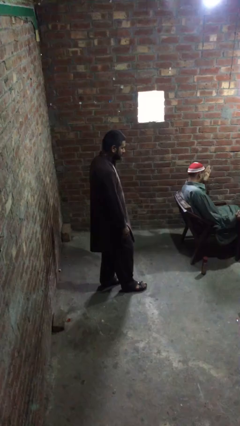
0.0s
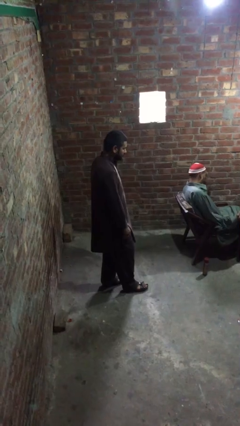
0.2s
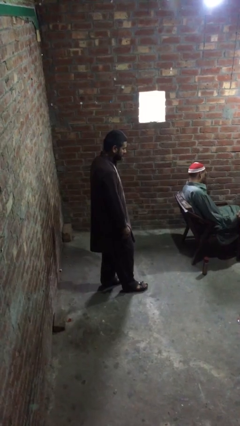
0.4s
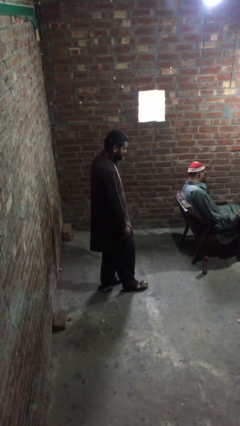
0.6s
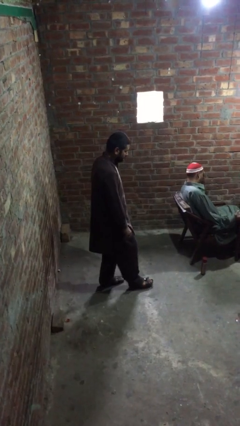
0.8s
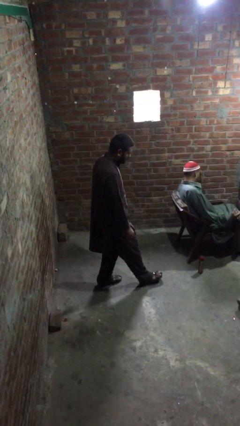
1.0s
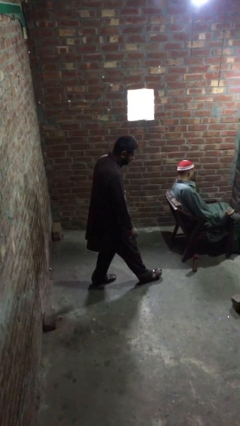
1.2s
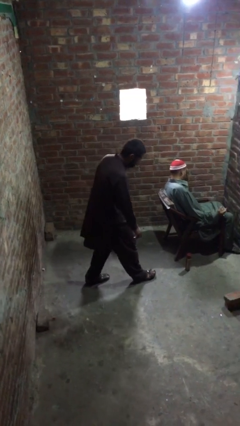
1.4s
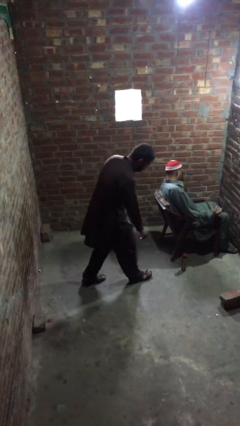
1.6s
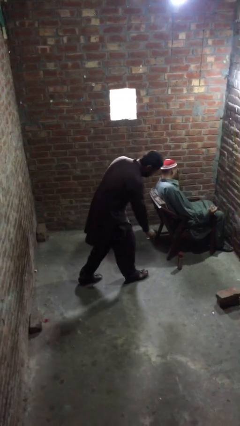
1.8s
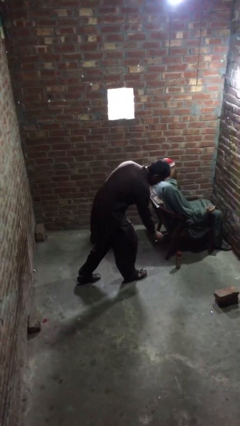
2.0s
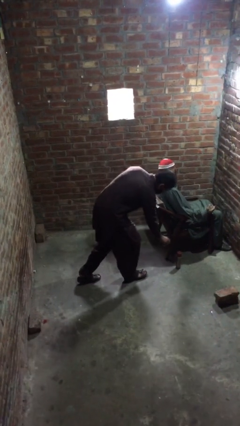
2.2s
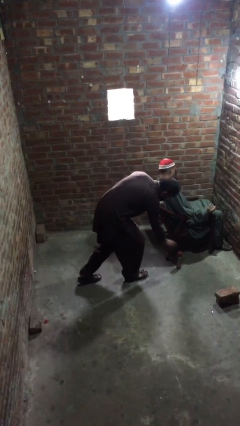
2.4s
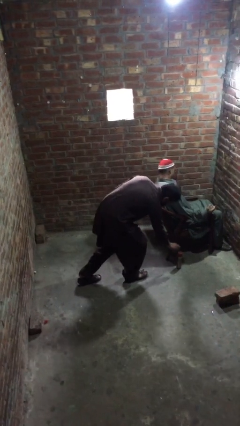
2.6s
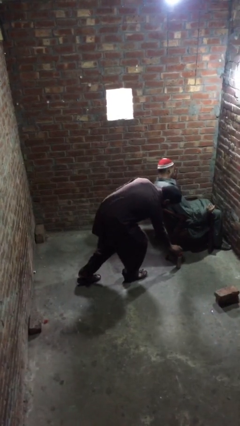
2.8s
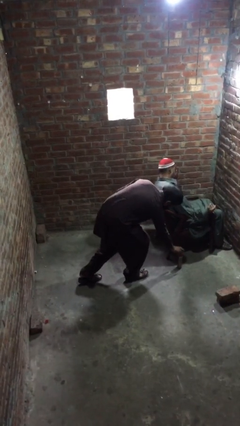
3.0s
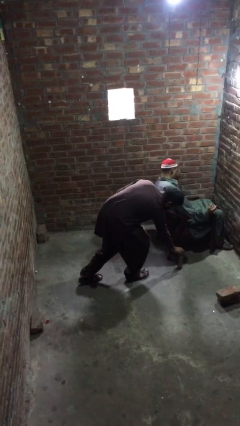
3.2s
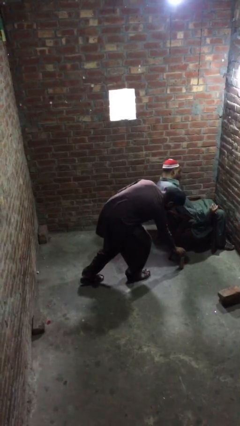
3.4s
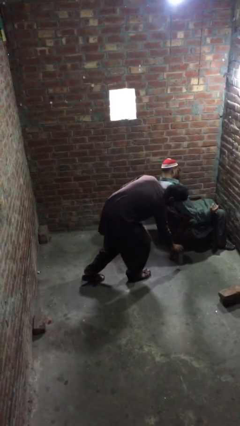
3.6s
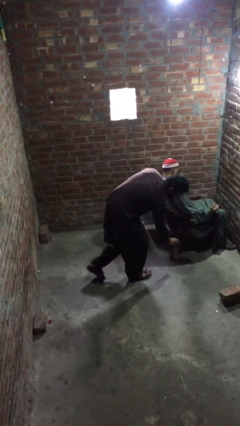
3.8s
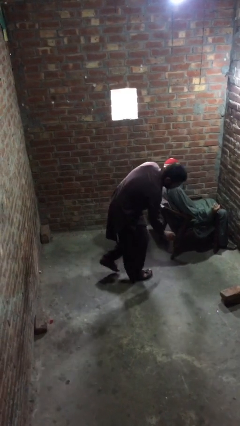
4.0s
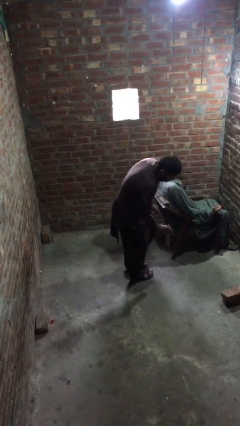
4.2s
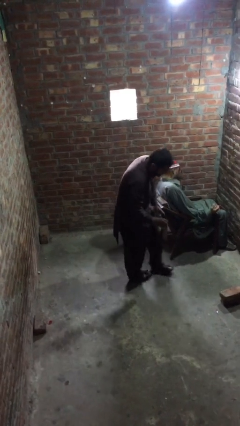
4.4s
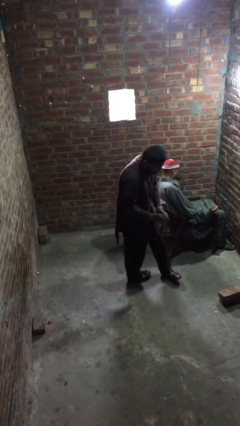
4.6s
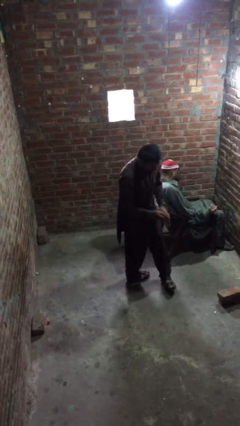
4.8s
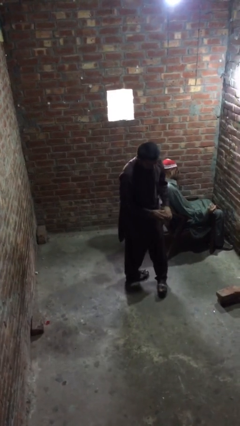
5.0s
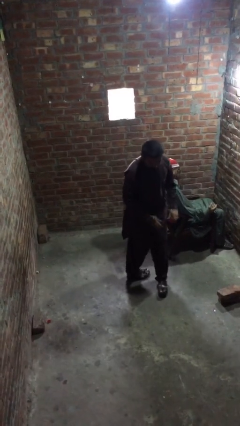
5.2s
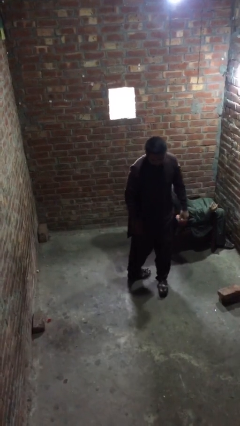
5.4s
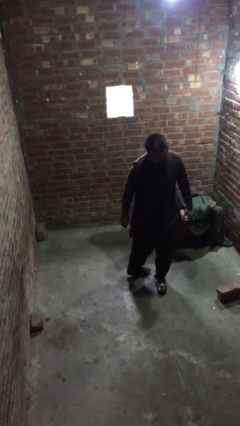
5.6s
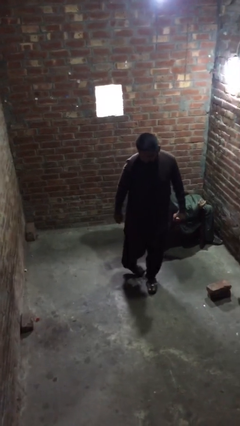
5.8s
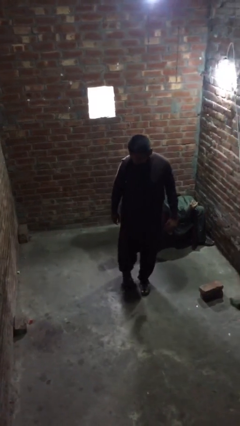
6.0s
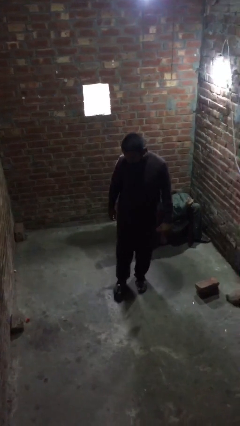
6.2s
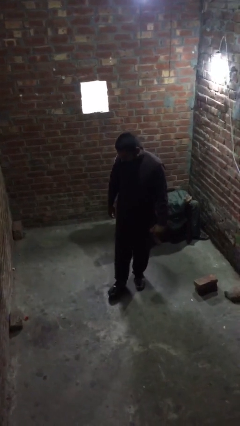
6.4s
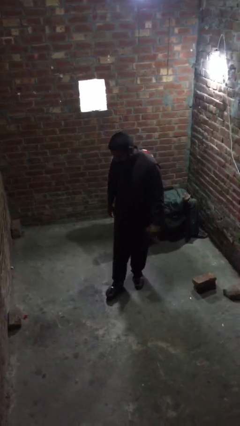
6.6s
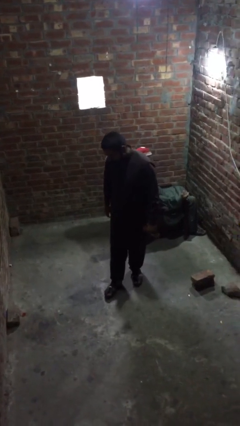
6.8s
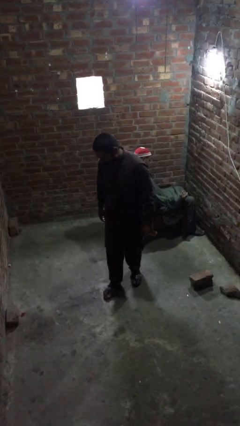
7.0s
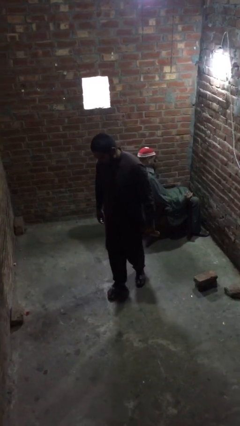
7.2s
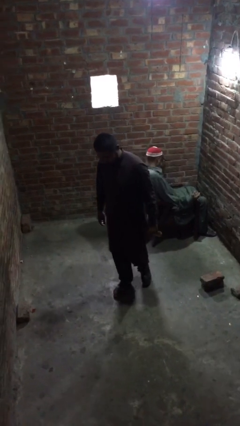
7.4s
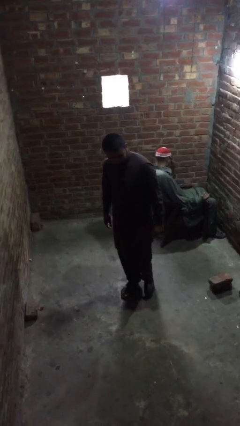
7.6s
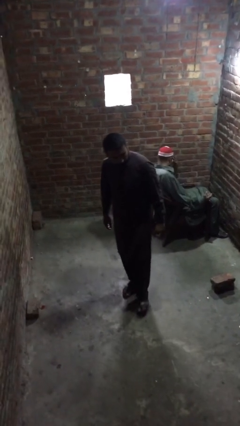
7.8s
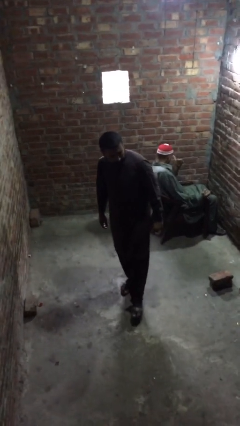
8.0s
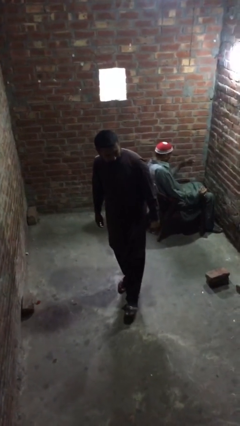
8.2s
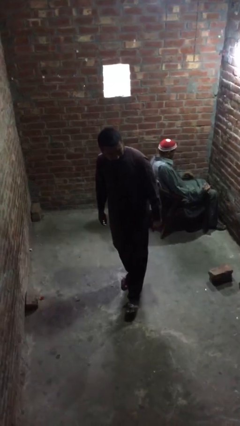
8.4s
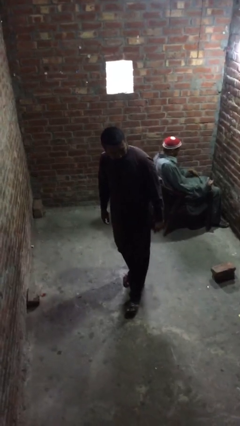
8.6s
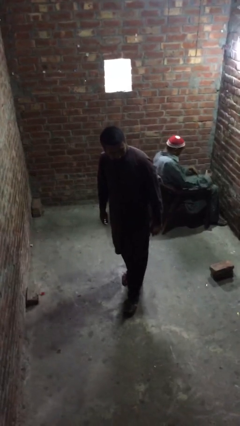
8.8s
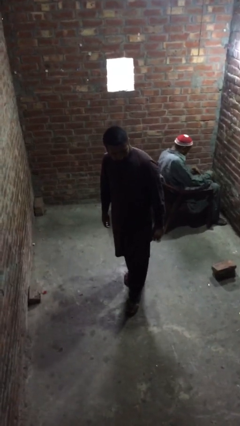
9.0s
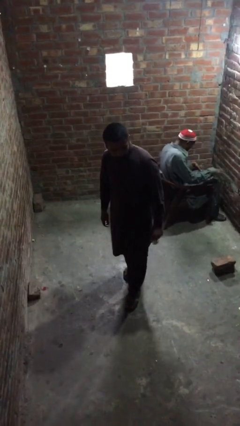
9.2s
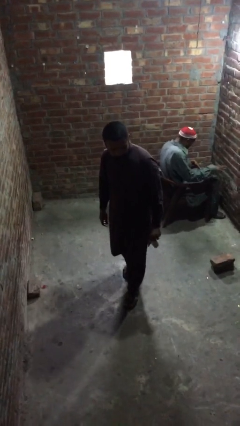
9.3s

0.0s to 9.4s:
person steals object from person

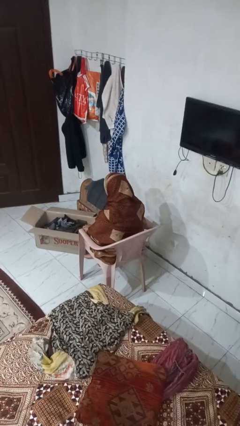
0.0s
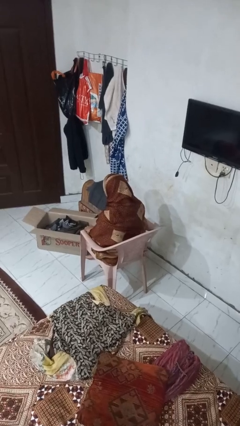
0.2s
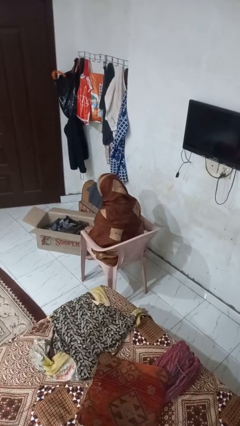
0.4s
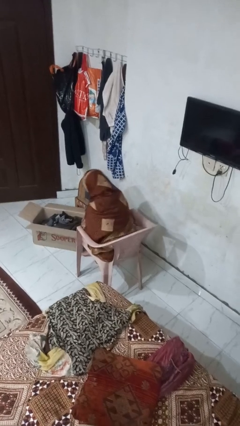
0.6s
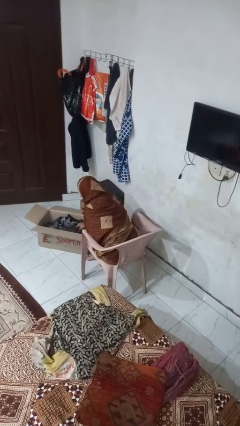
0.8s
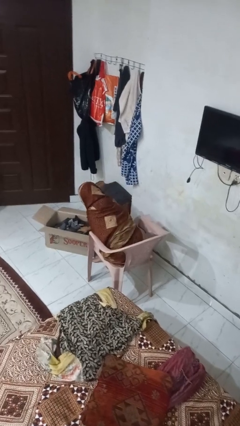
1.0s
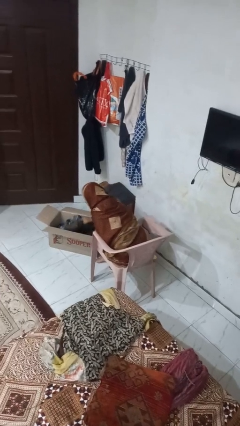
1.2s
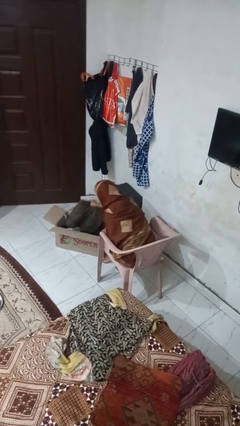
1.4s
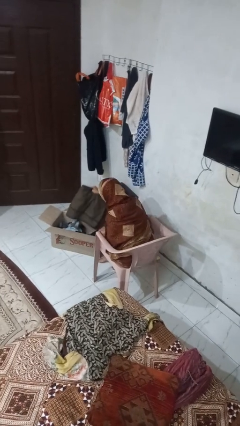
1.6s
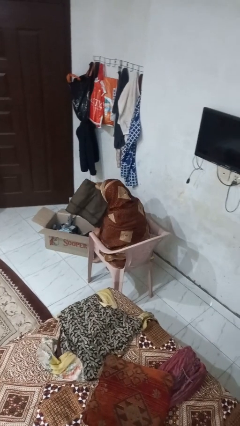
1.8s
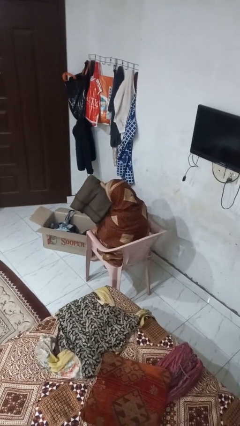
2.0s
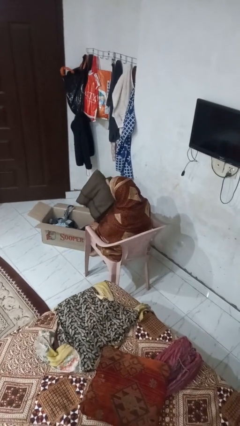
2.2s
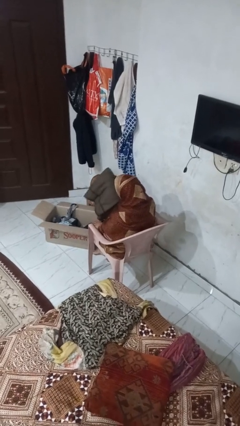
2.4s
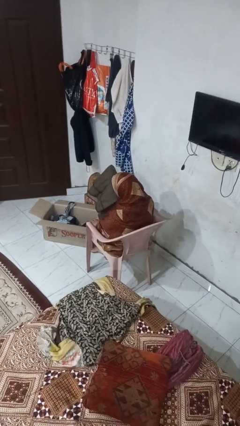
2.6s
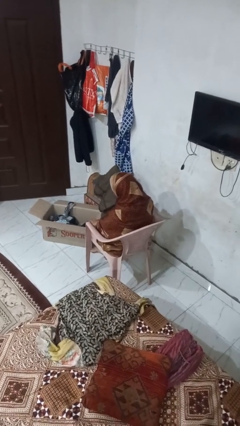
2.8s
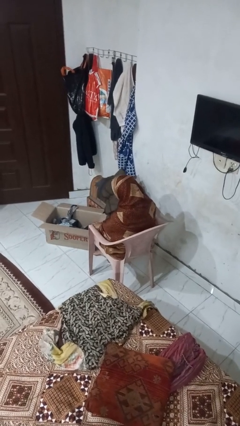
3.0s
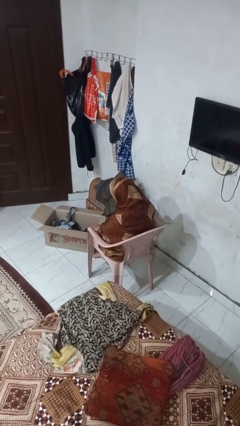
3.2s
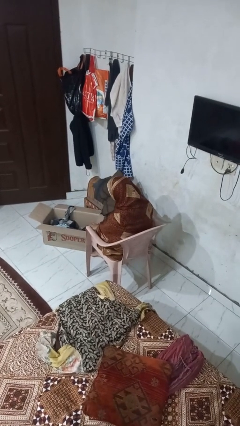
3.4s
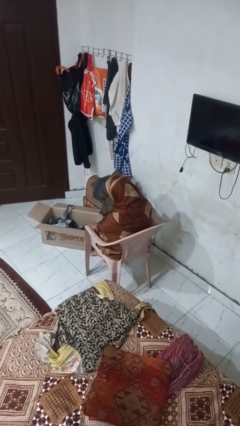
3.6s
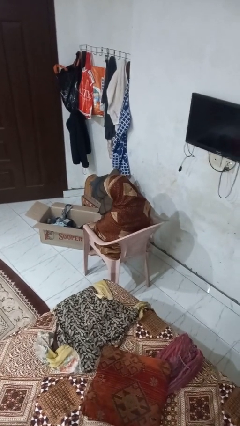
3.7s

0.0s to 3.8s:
person takes object from box

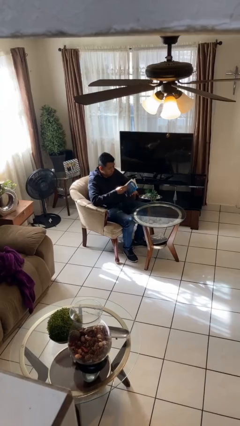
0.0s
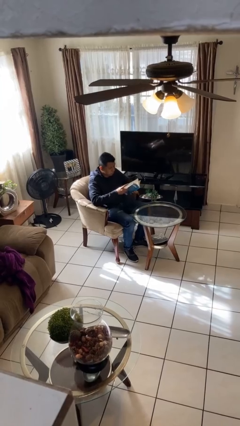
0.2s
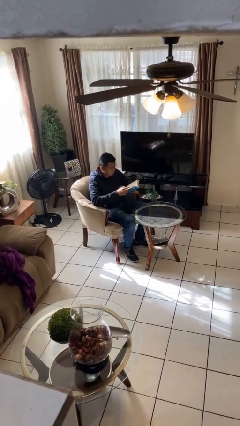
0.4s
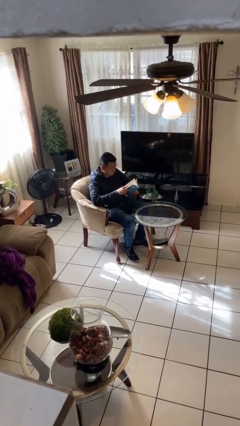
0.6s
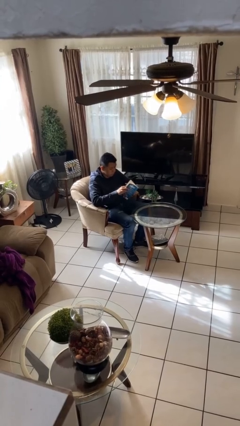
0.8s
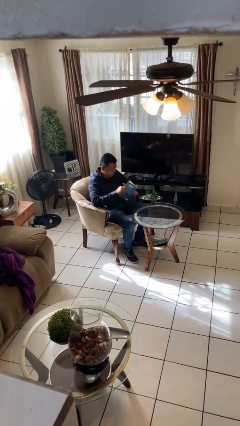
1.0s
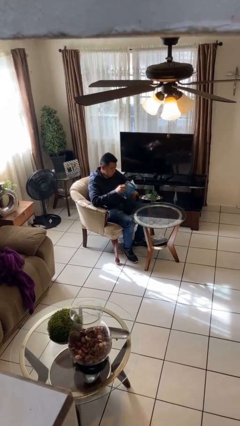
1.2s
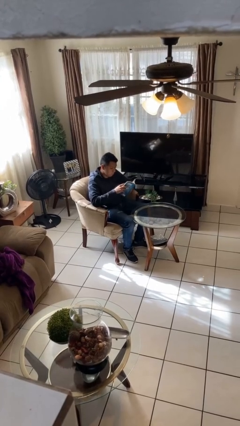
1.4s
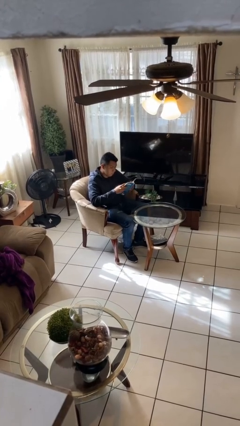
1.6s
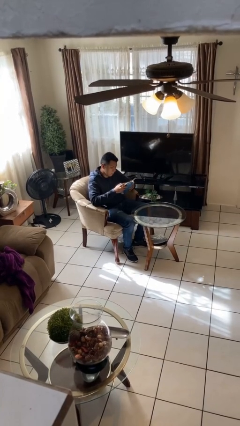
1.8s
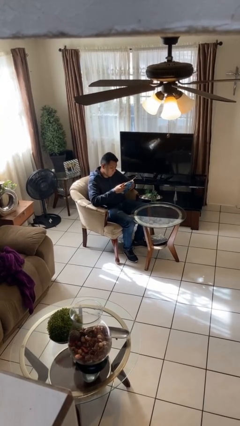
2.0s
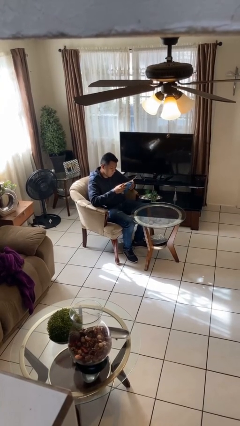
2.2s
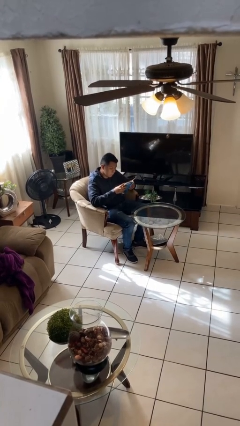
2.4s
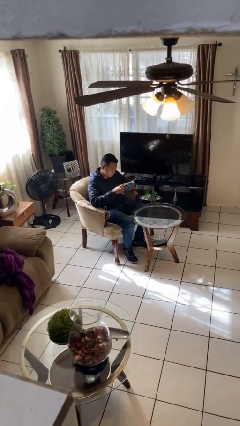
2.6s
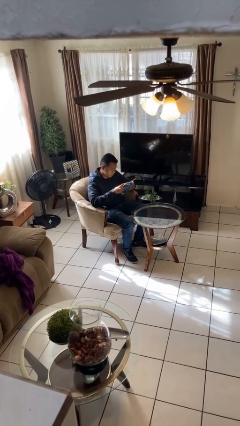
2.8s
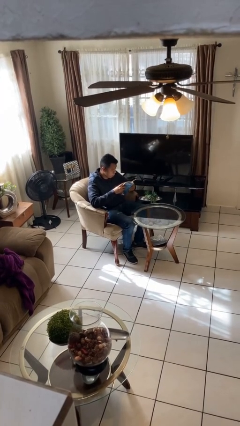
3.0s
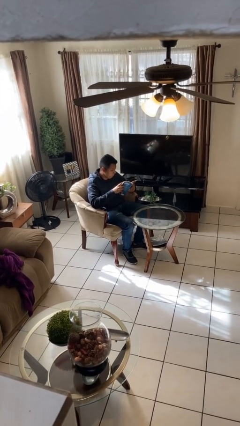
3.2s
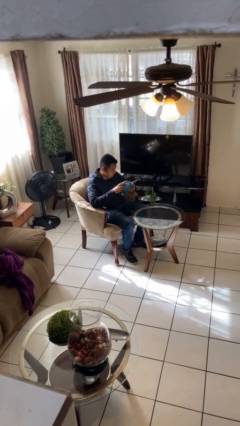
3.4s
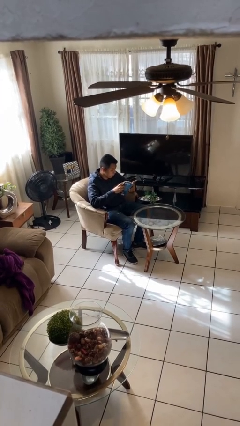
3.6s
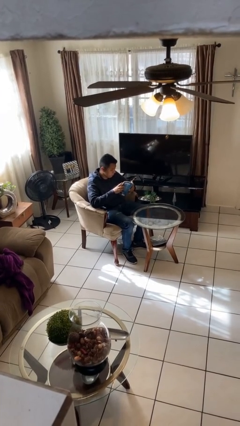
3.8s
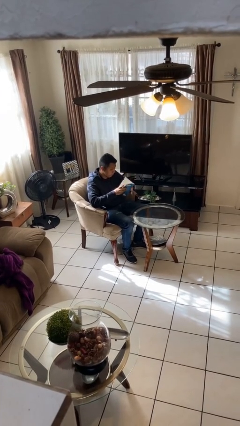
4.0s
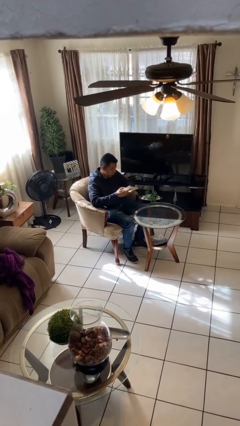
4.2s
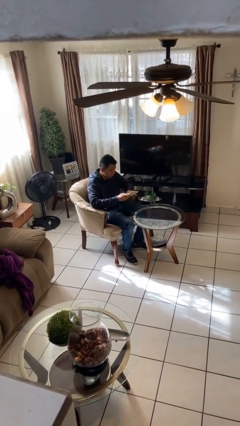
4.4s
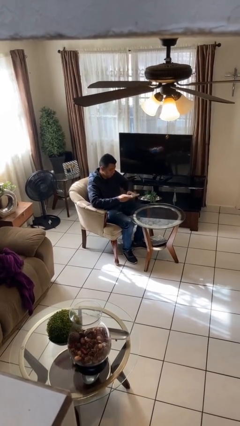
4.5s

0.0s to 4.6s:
person reads document
